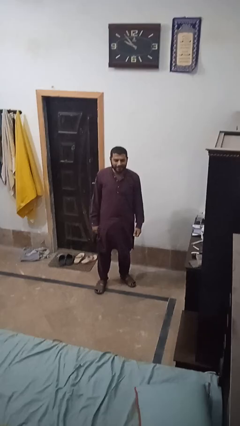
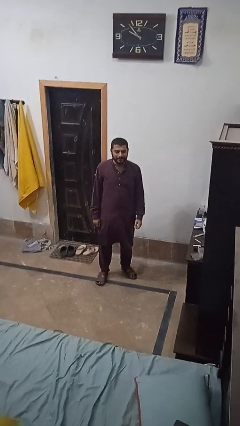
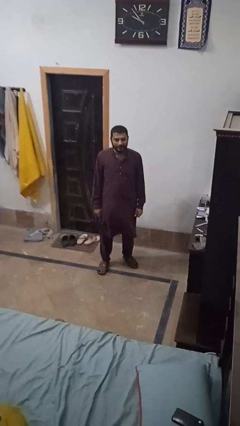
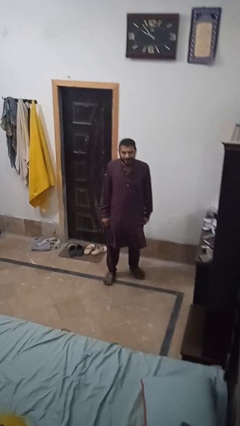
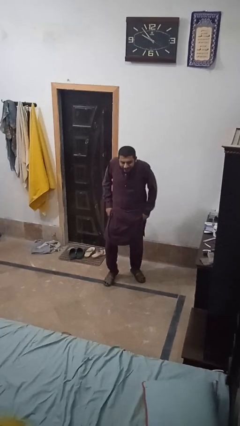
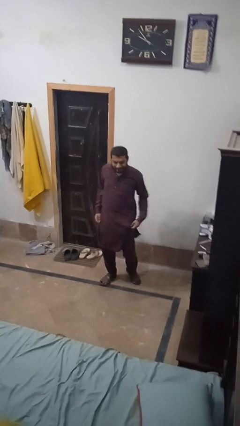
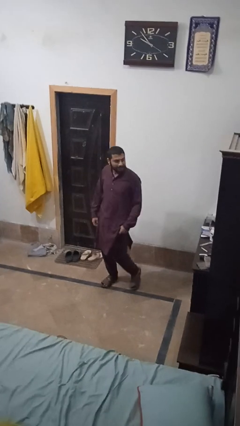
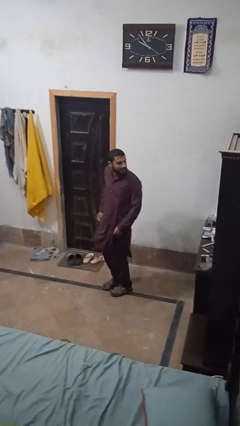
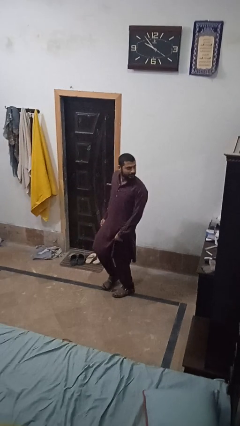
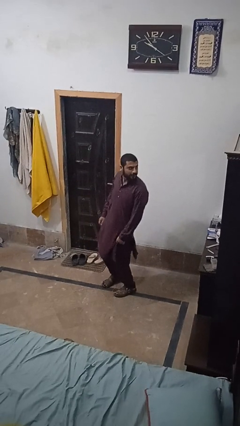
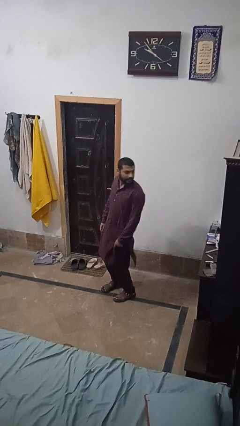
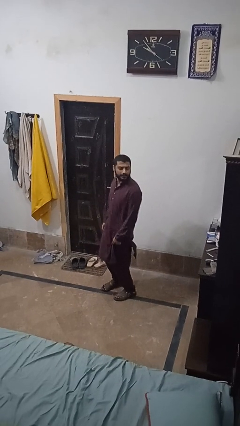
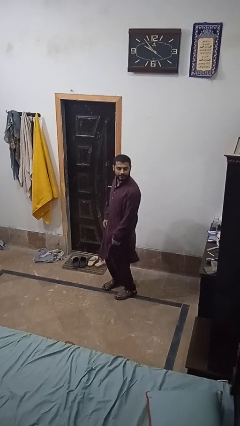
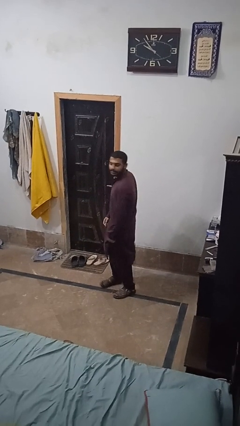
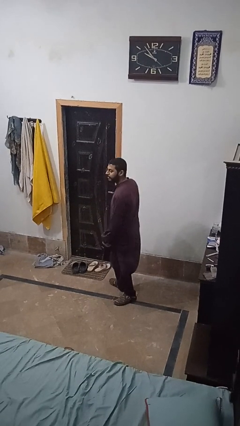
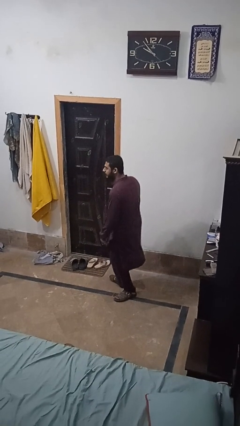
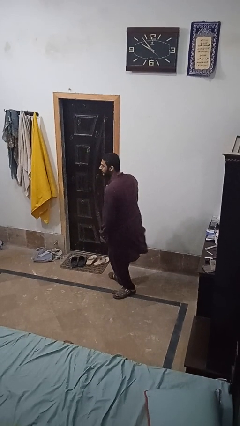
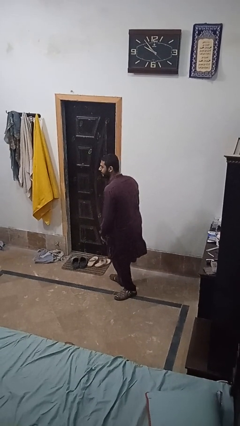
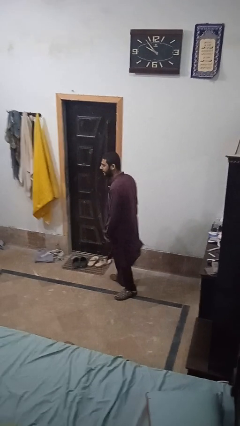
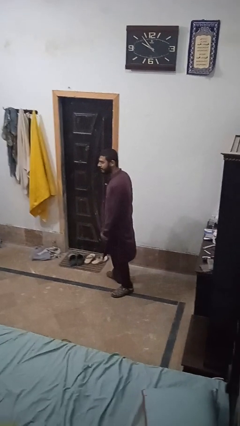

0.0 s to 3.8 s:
person dances in place

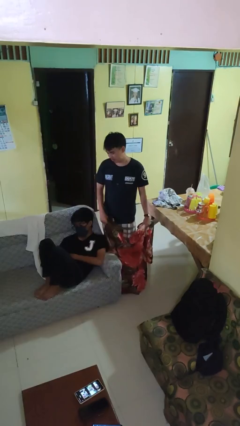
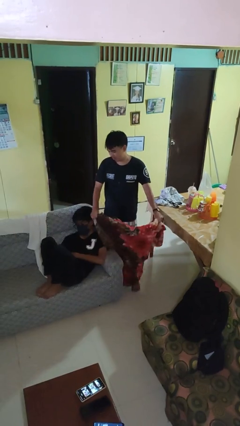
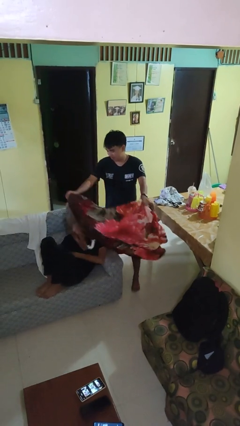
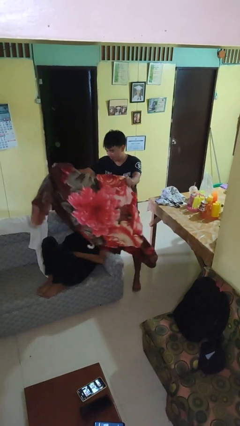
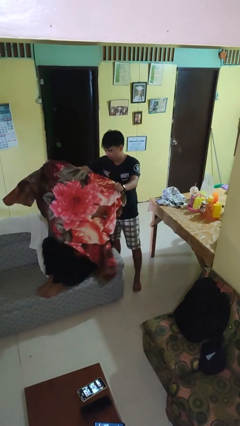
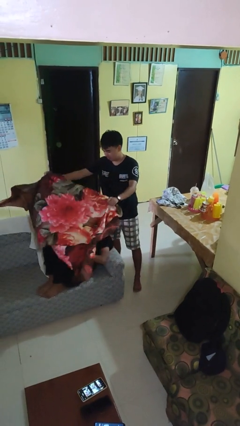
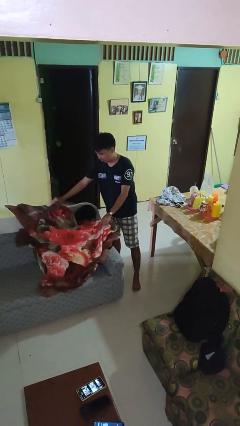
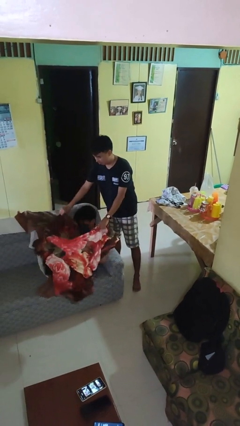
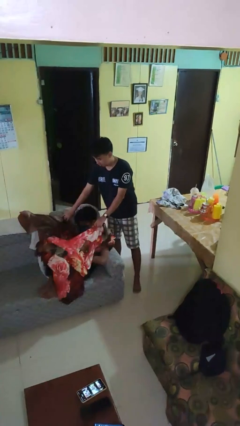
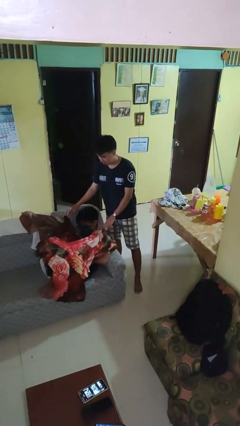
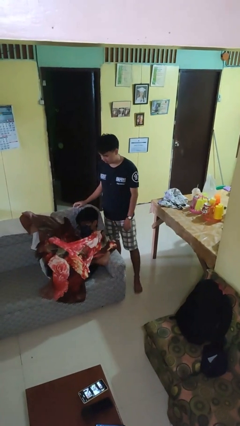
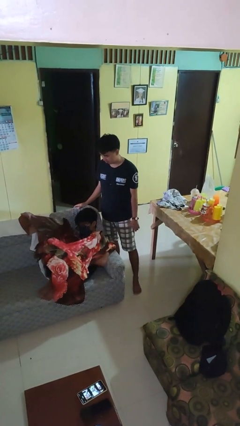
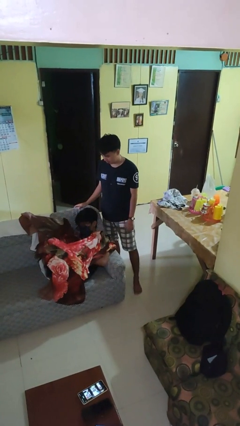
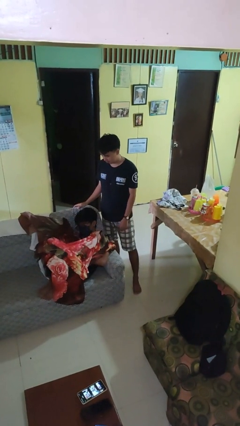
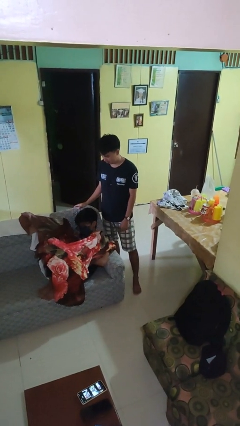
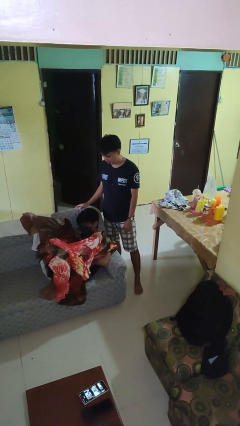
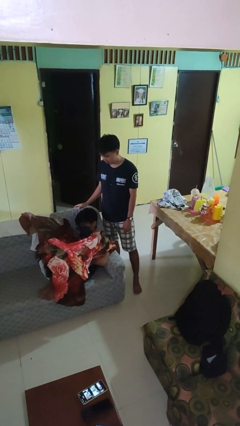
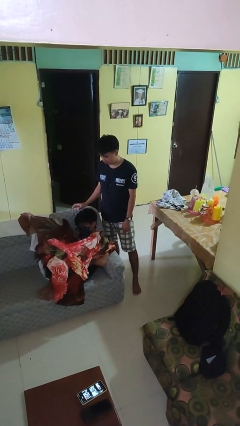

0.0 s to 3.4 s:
person covers friend with blanket

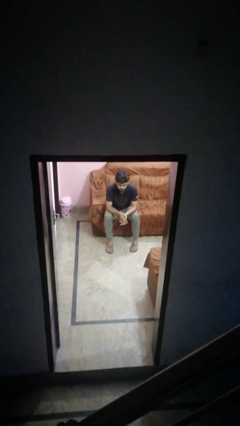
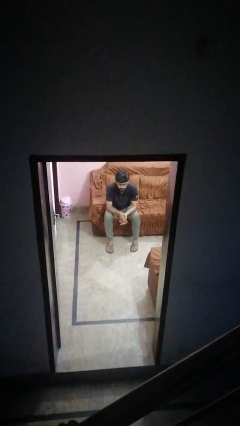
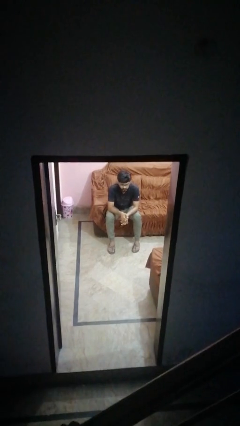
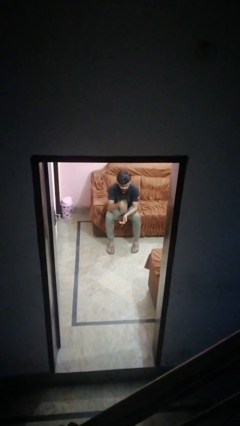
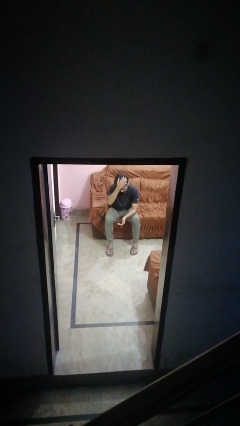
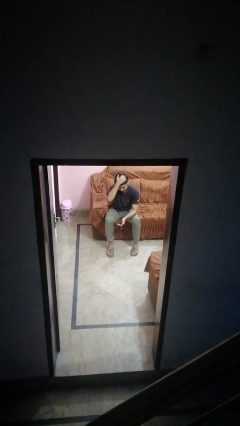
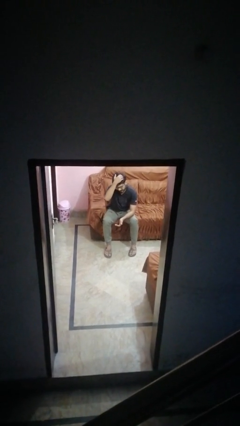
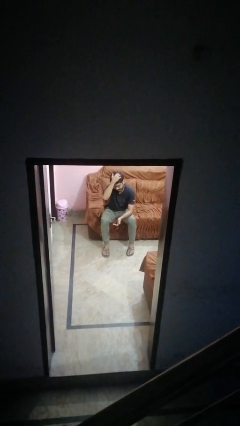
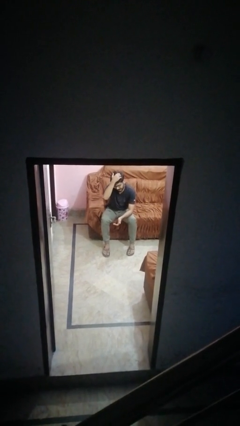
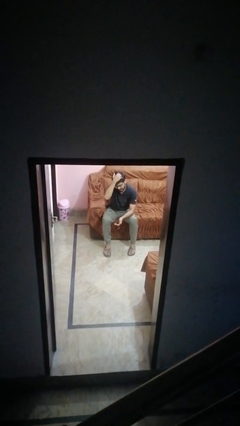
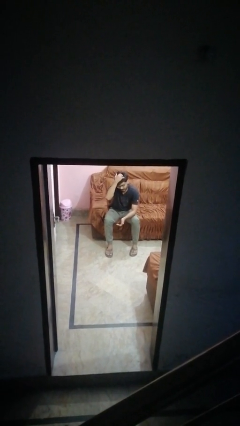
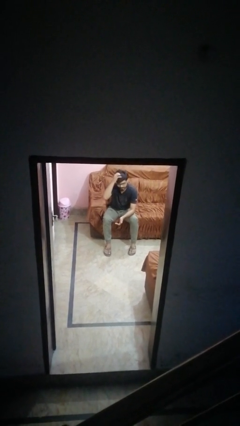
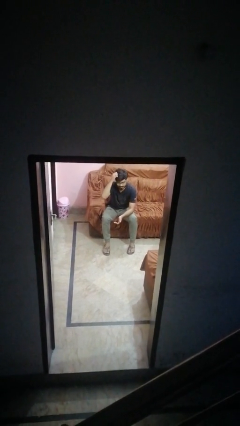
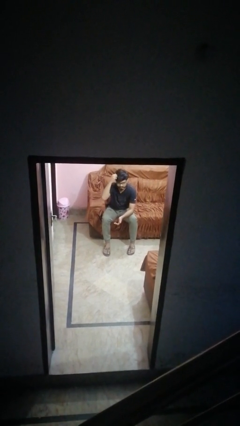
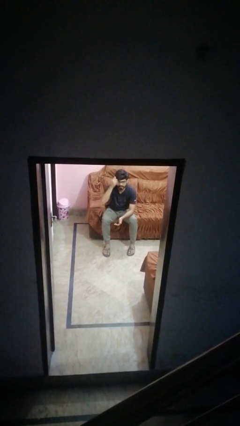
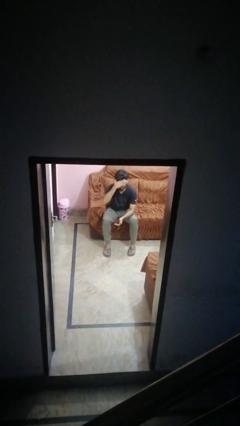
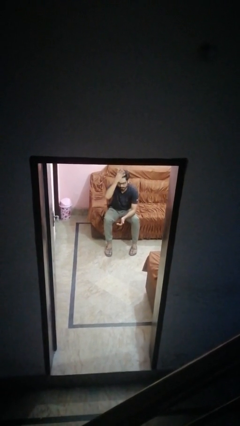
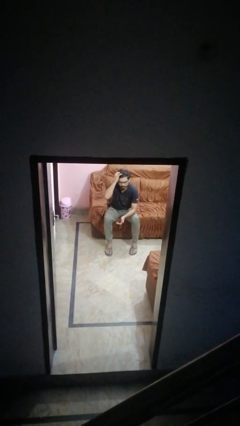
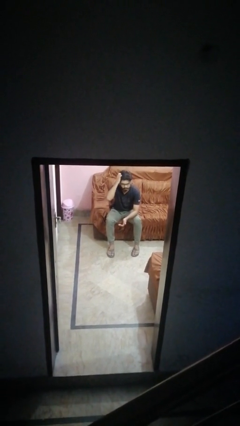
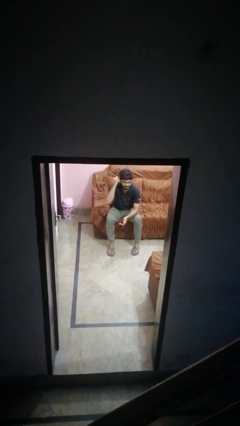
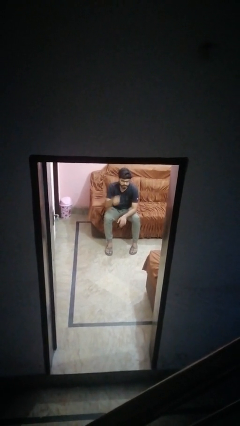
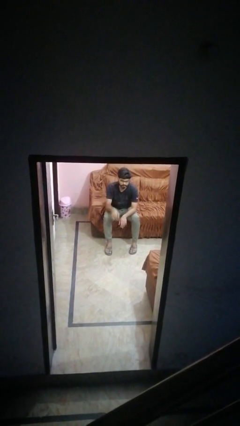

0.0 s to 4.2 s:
person scratches face

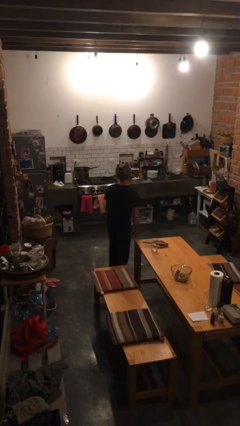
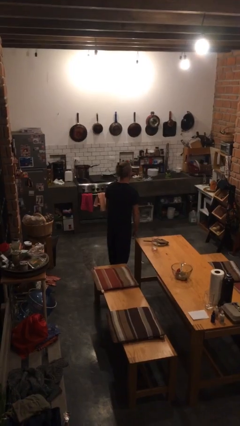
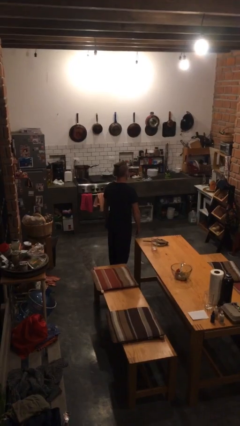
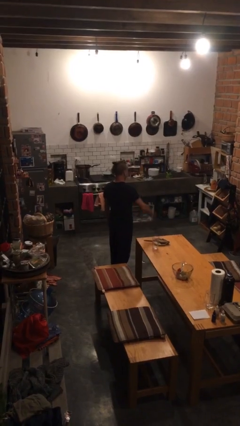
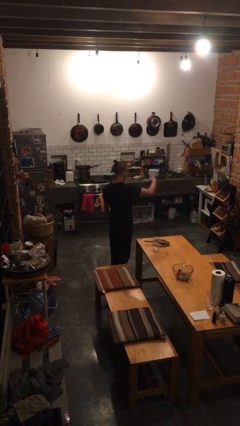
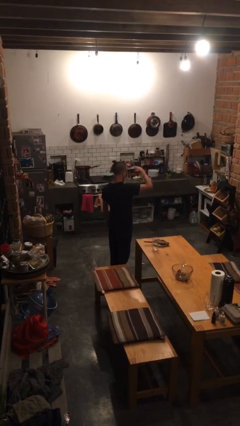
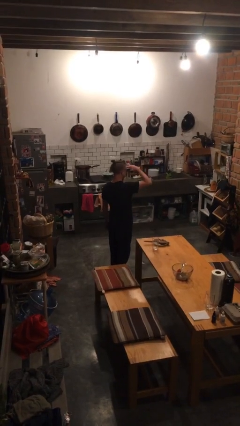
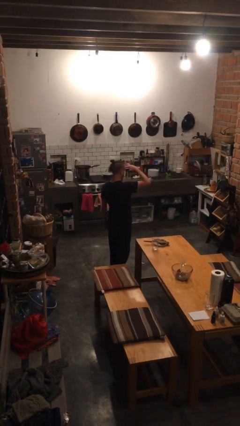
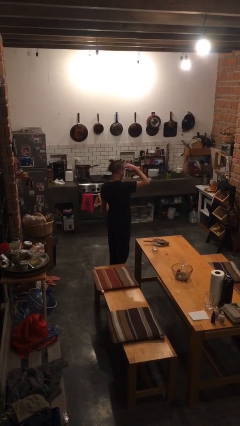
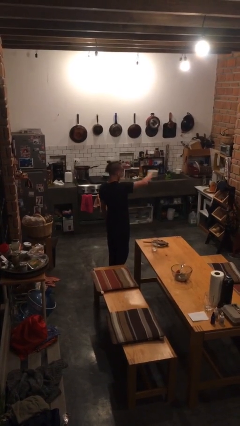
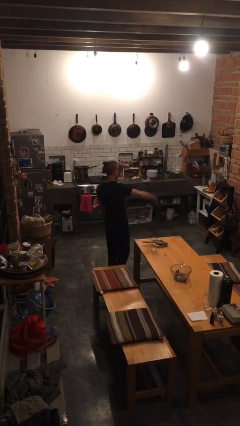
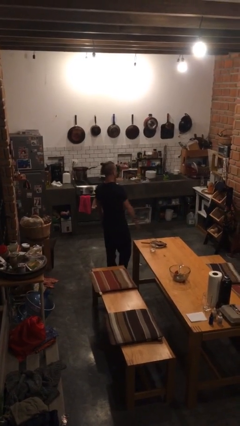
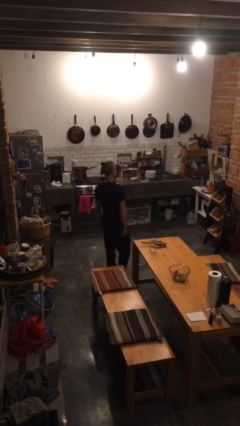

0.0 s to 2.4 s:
person salutes

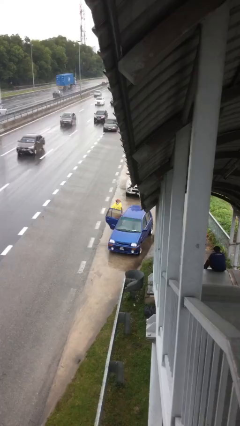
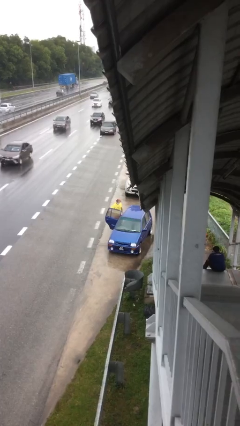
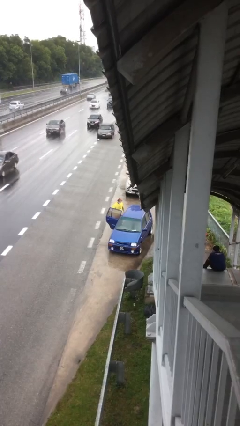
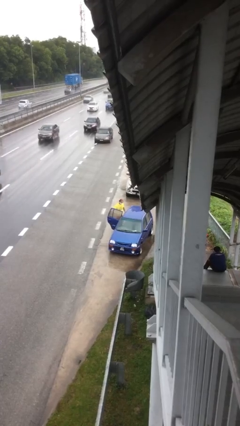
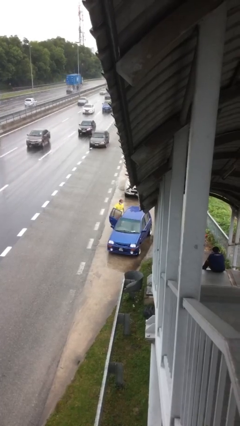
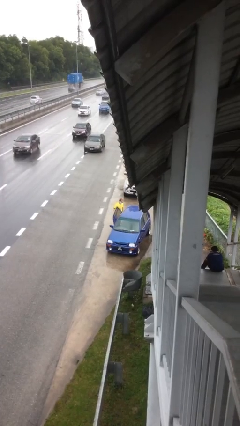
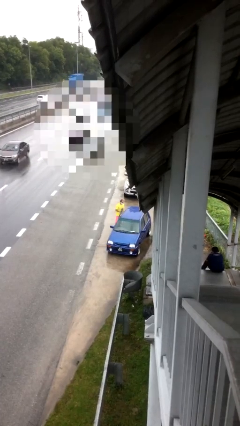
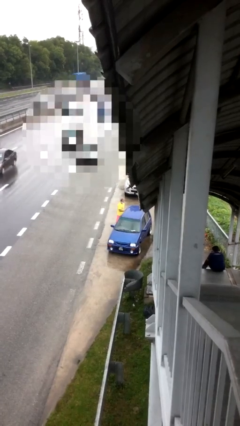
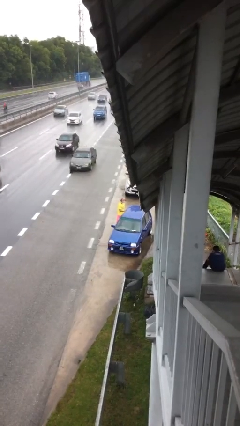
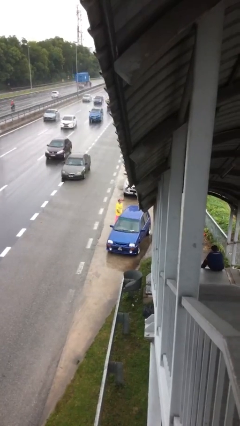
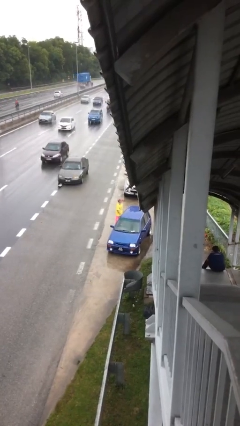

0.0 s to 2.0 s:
person closes car door

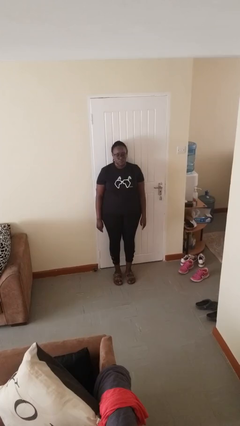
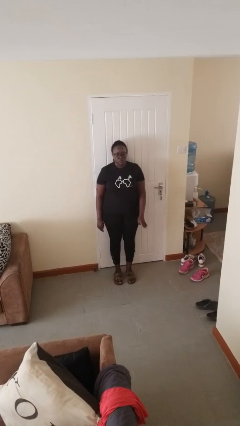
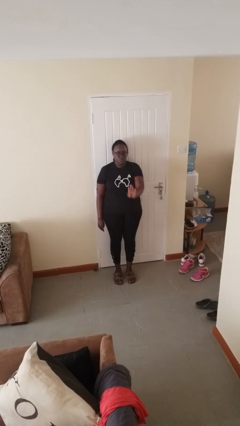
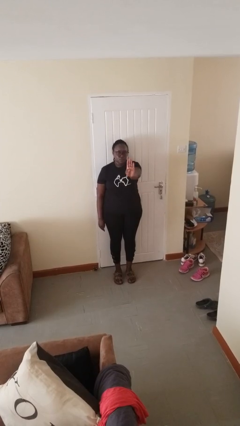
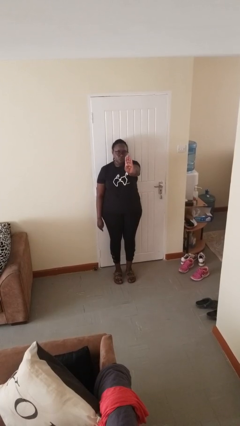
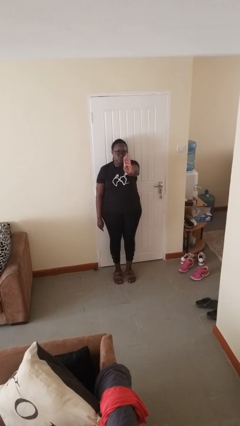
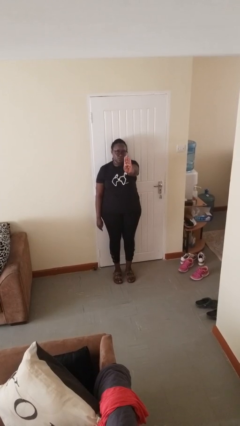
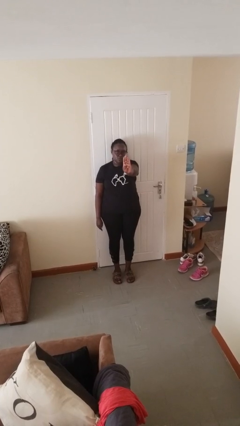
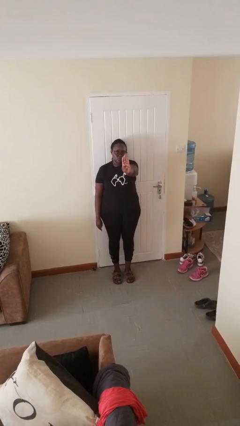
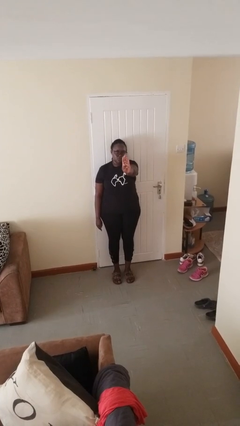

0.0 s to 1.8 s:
person gestures number four
